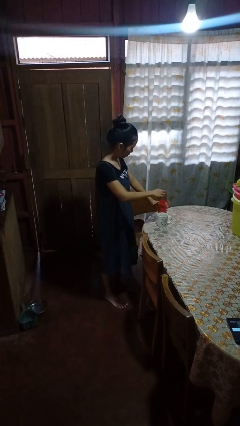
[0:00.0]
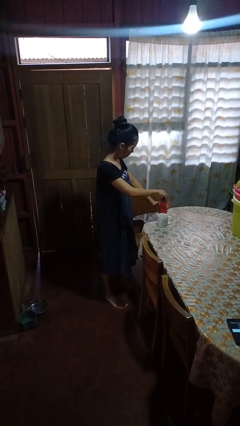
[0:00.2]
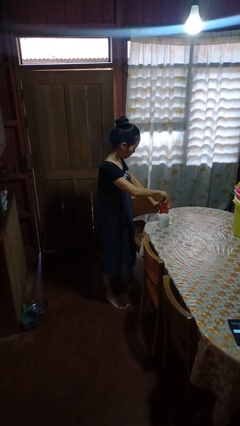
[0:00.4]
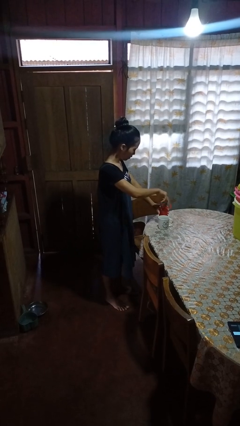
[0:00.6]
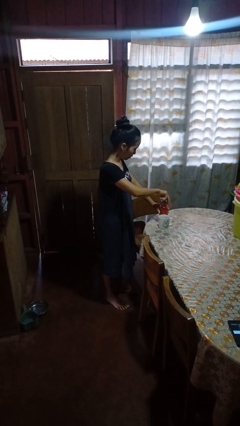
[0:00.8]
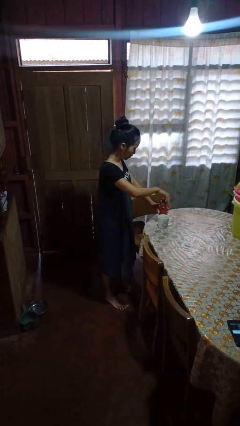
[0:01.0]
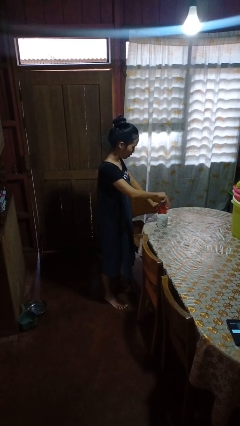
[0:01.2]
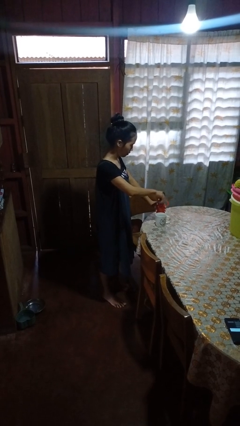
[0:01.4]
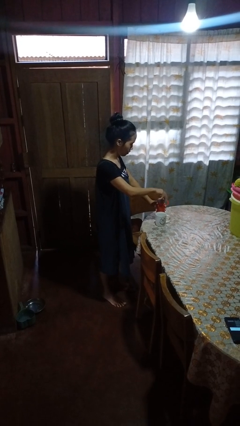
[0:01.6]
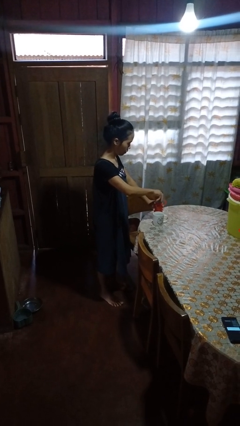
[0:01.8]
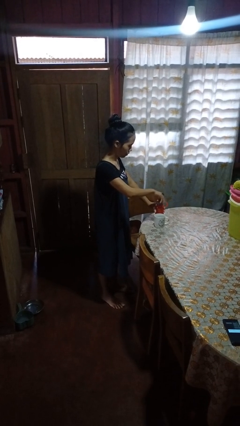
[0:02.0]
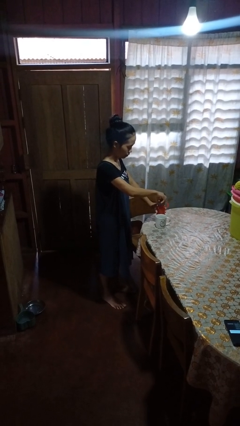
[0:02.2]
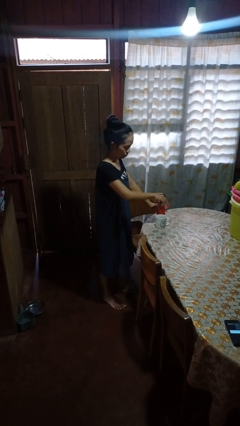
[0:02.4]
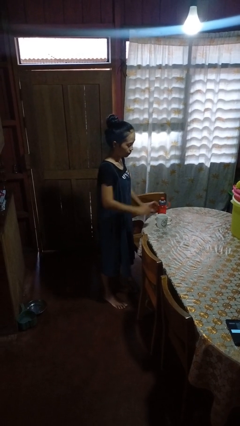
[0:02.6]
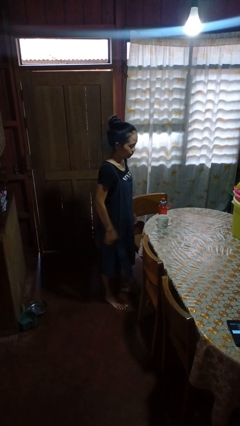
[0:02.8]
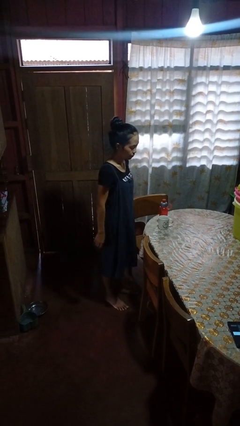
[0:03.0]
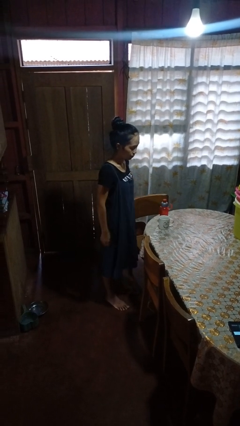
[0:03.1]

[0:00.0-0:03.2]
person screws lid to bottle

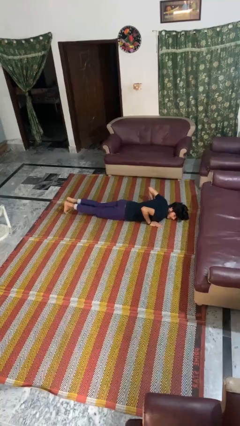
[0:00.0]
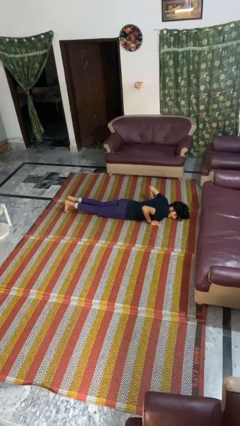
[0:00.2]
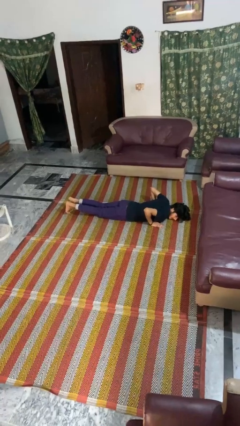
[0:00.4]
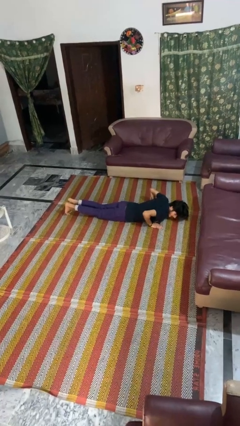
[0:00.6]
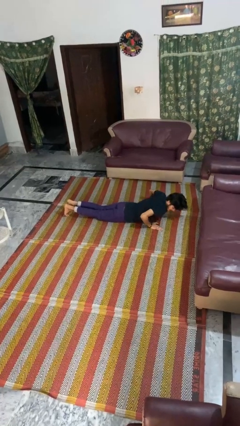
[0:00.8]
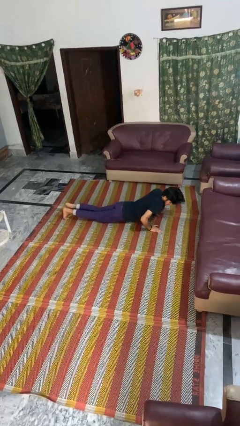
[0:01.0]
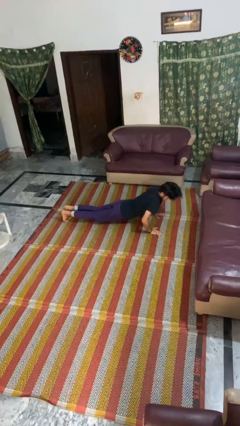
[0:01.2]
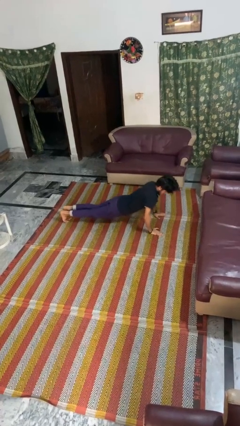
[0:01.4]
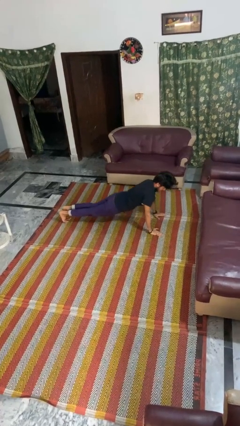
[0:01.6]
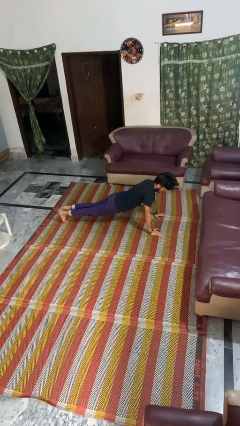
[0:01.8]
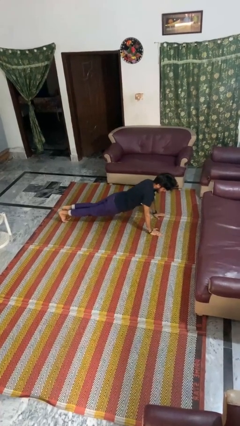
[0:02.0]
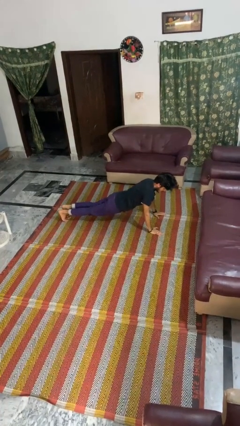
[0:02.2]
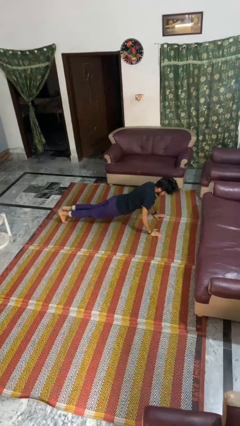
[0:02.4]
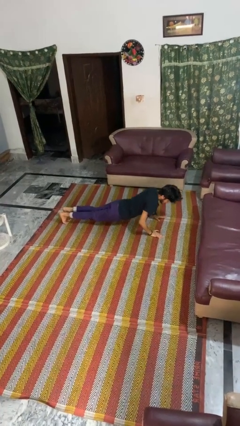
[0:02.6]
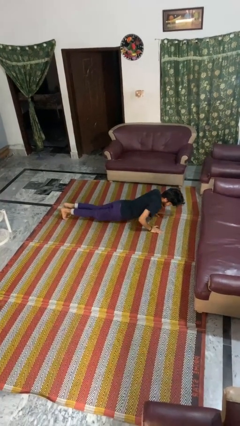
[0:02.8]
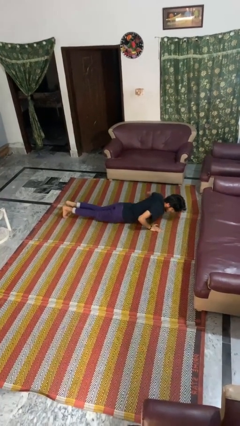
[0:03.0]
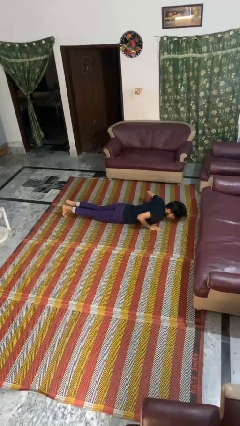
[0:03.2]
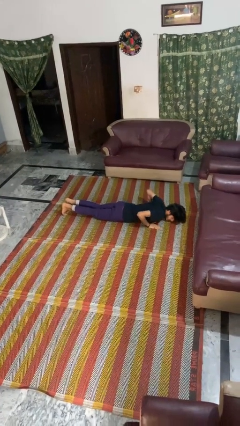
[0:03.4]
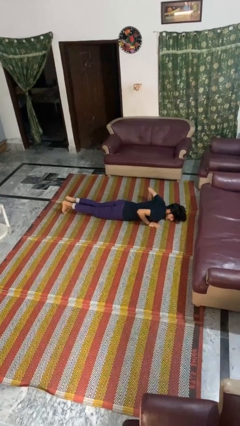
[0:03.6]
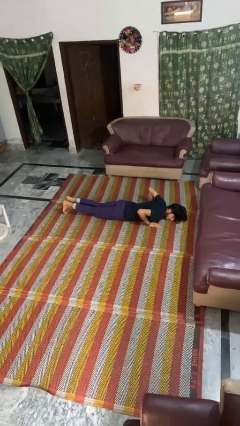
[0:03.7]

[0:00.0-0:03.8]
person exercises with pushup

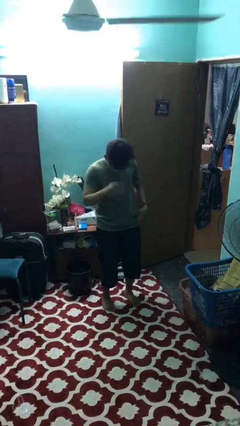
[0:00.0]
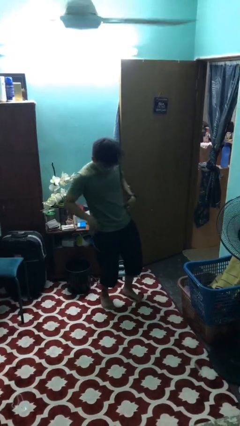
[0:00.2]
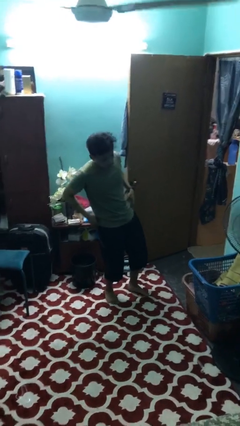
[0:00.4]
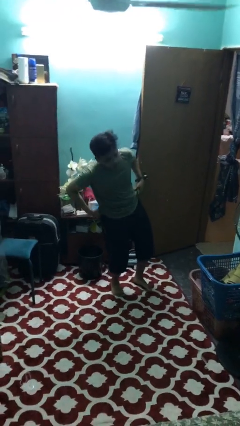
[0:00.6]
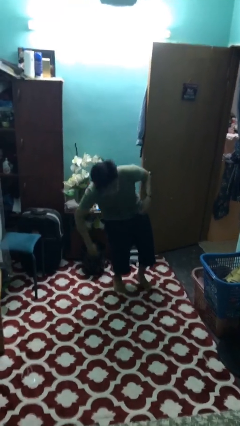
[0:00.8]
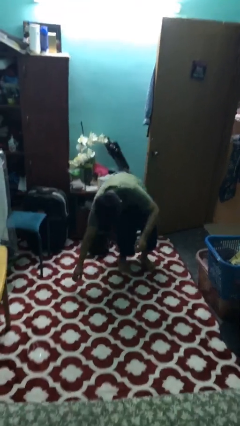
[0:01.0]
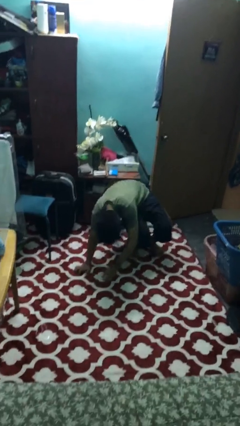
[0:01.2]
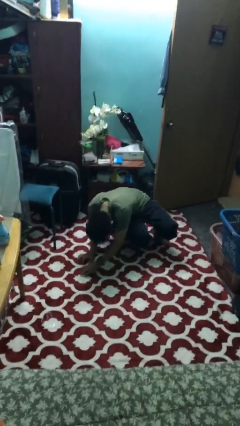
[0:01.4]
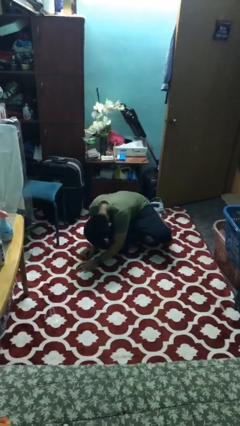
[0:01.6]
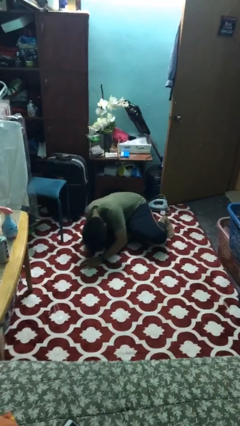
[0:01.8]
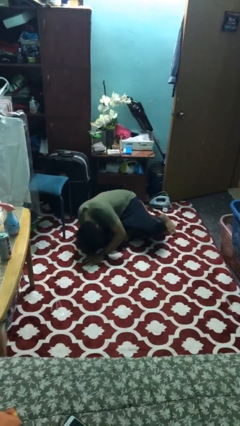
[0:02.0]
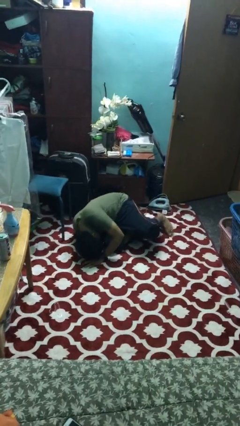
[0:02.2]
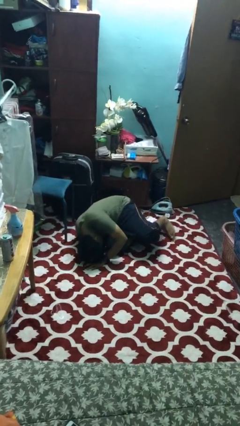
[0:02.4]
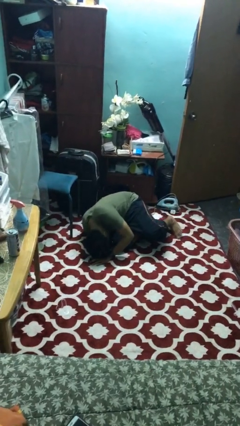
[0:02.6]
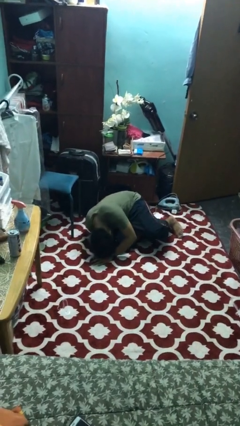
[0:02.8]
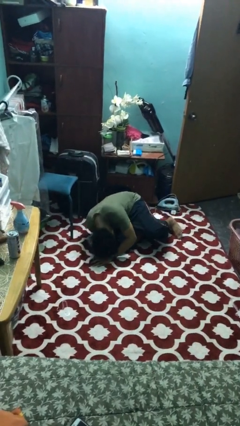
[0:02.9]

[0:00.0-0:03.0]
person falls while standing

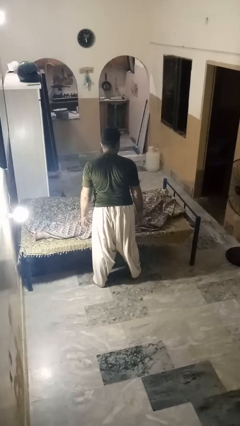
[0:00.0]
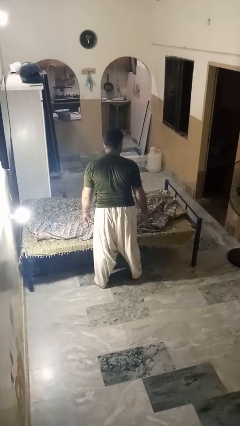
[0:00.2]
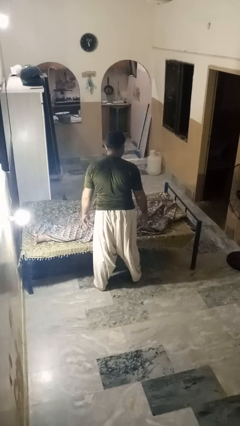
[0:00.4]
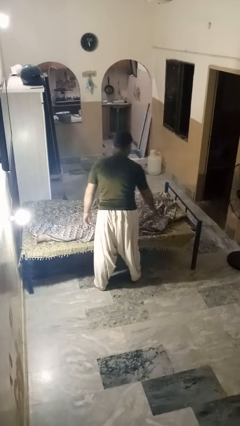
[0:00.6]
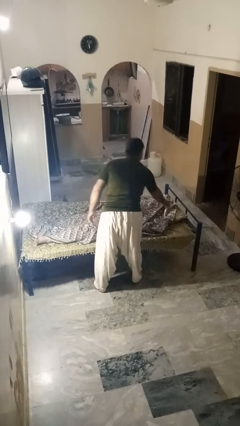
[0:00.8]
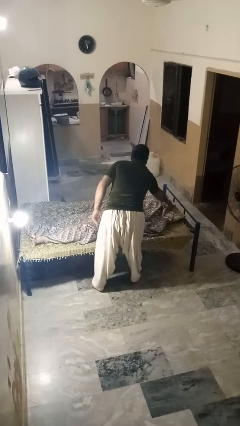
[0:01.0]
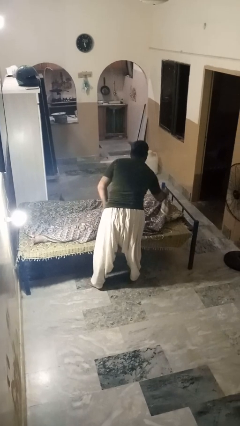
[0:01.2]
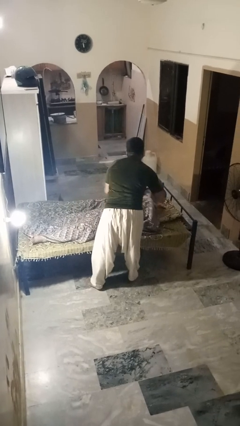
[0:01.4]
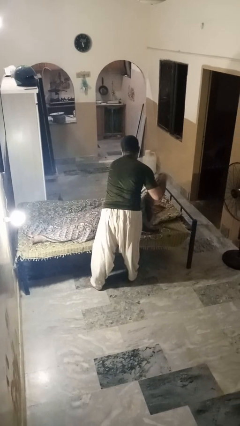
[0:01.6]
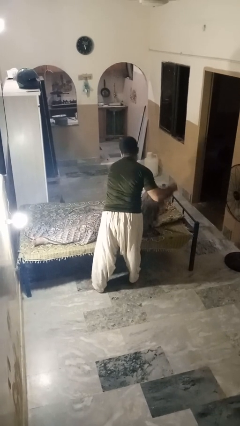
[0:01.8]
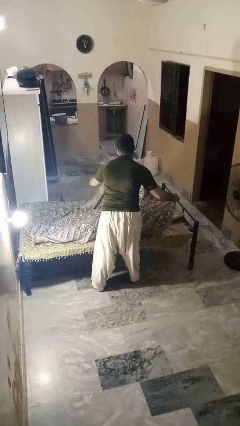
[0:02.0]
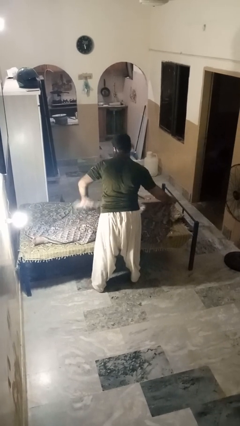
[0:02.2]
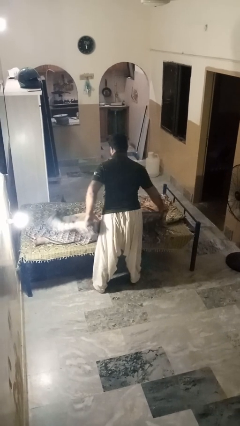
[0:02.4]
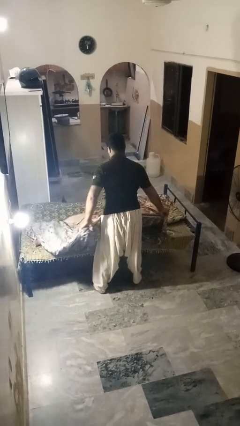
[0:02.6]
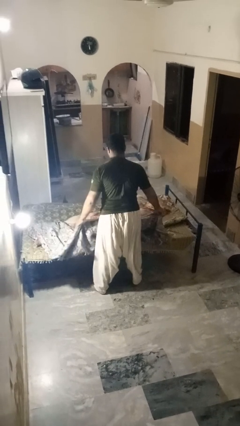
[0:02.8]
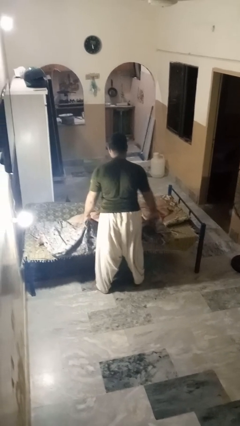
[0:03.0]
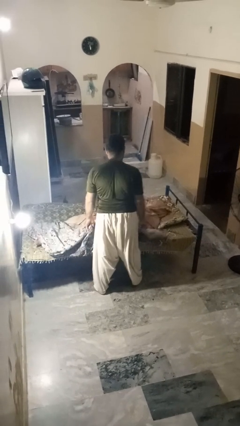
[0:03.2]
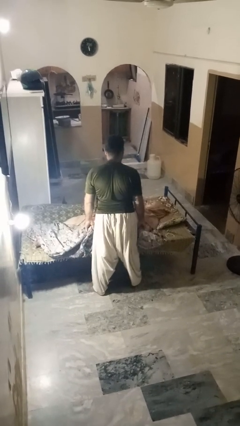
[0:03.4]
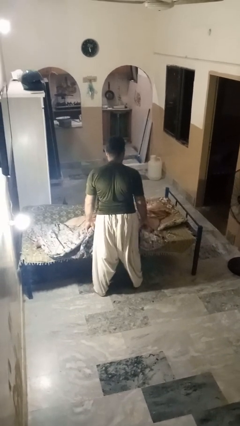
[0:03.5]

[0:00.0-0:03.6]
person uncovers friend with blanket

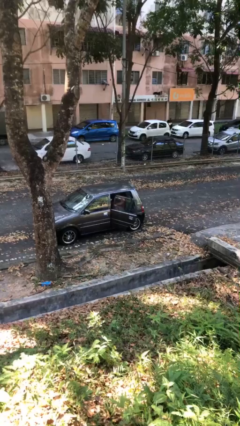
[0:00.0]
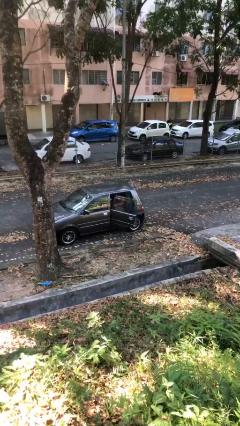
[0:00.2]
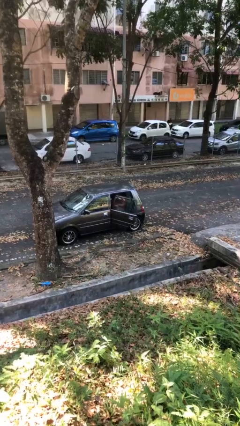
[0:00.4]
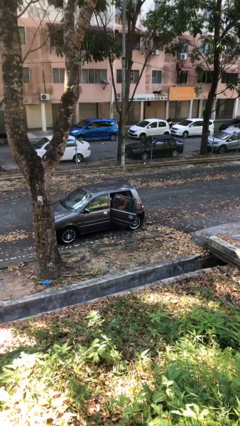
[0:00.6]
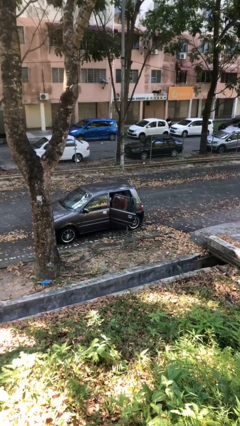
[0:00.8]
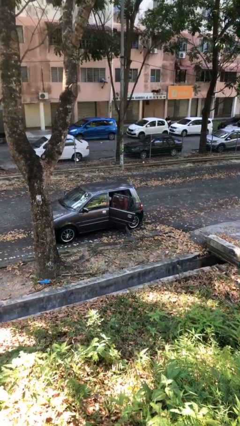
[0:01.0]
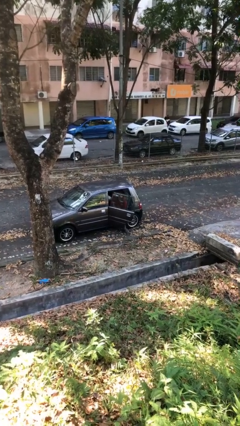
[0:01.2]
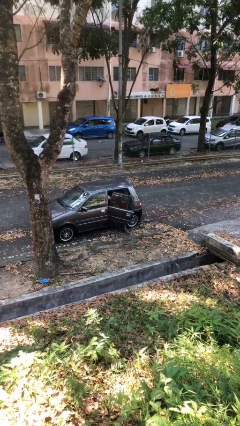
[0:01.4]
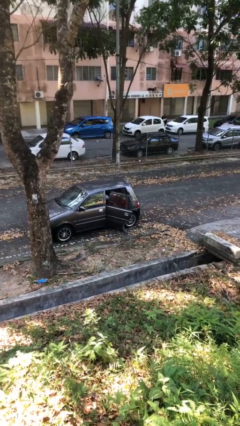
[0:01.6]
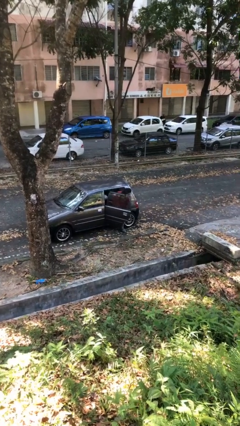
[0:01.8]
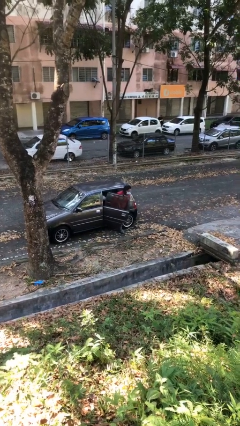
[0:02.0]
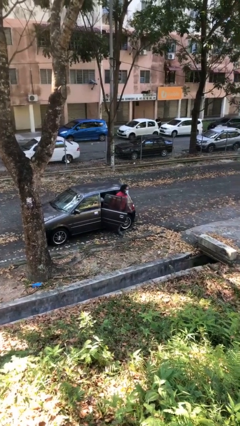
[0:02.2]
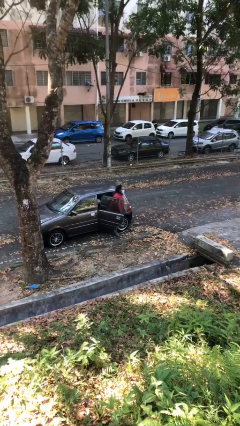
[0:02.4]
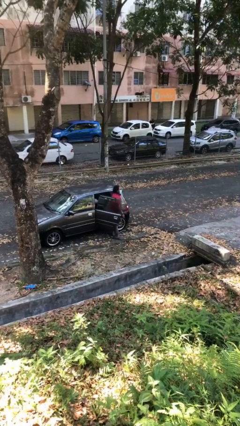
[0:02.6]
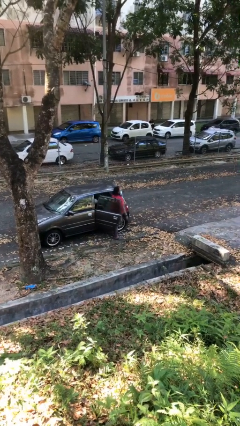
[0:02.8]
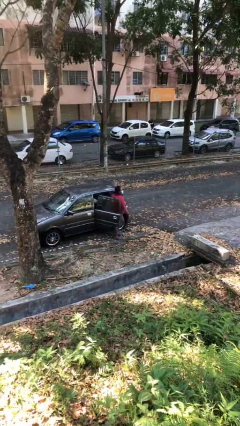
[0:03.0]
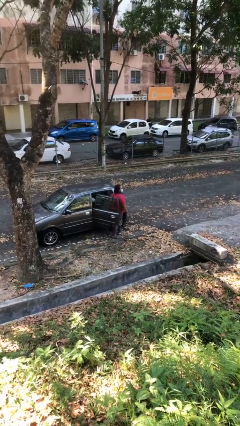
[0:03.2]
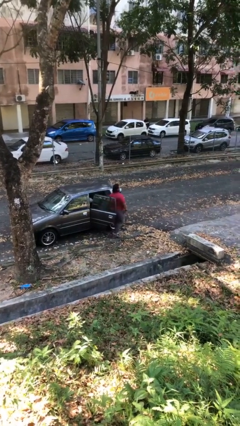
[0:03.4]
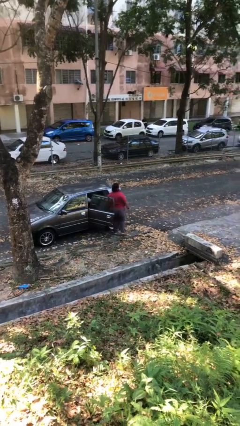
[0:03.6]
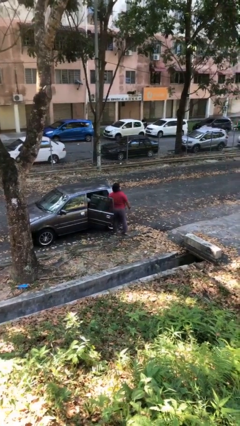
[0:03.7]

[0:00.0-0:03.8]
person exits car

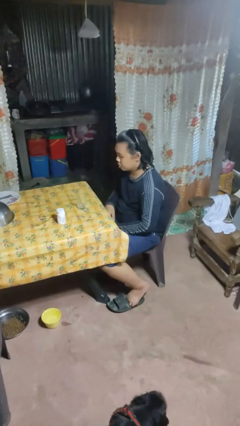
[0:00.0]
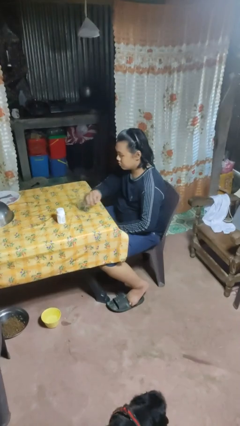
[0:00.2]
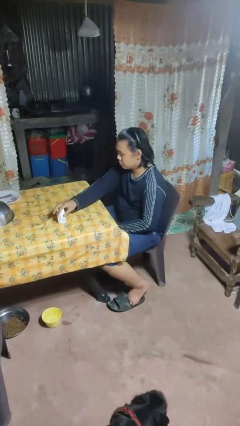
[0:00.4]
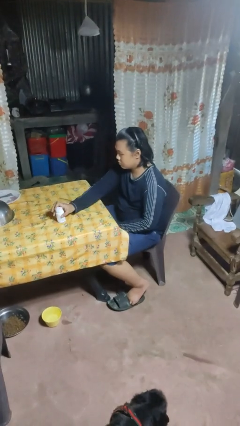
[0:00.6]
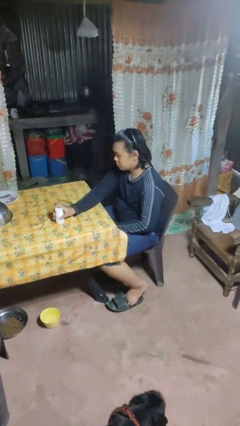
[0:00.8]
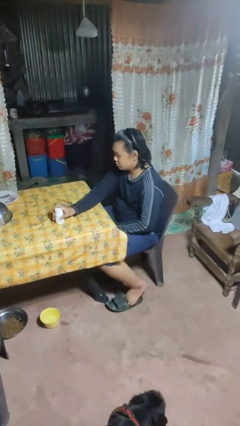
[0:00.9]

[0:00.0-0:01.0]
person knocks over glass
